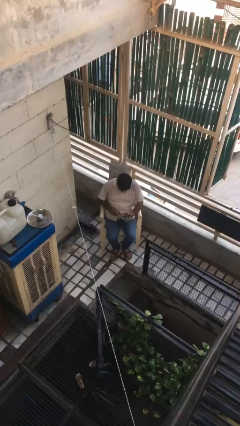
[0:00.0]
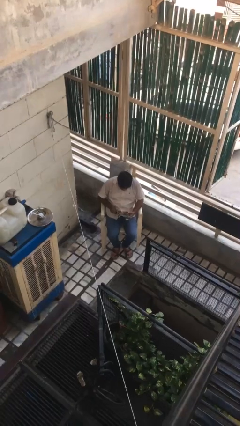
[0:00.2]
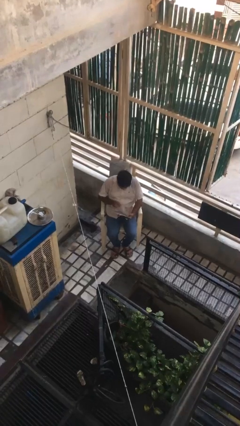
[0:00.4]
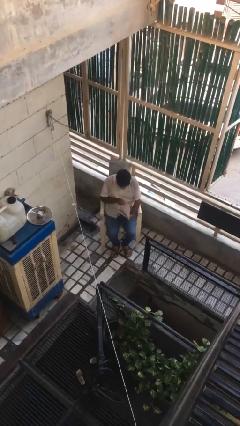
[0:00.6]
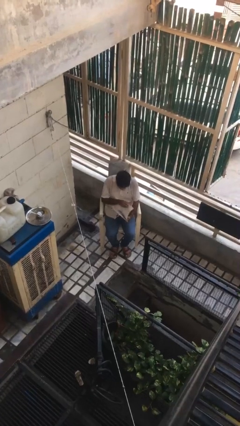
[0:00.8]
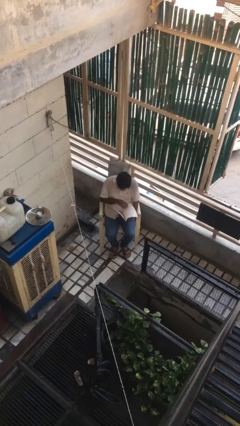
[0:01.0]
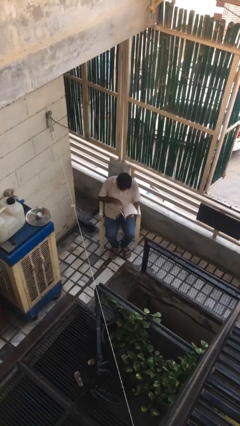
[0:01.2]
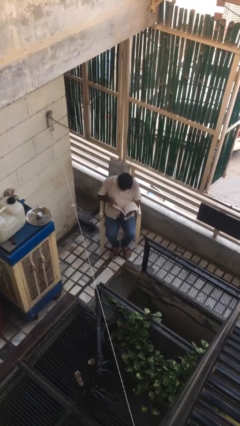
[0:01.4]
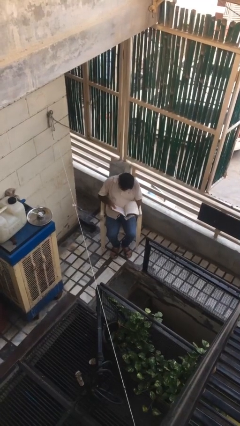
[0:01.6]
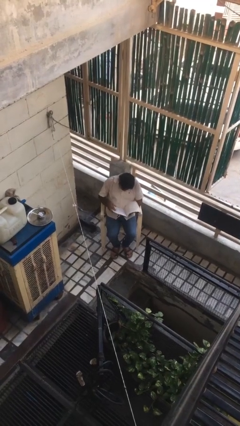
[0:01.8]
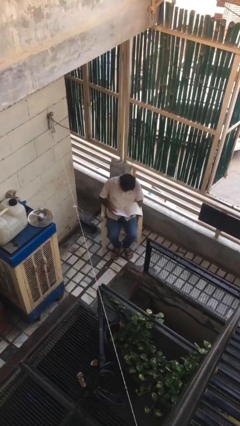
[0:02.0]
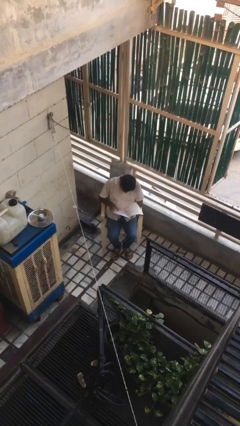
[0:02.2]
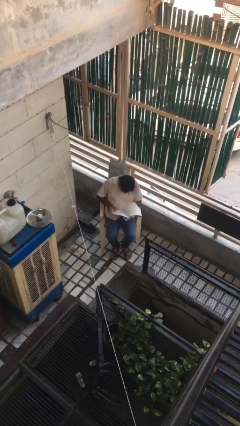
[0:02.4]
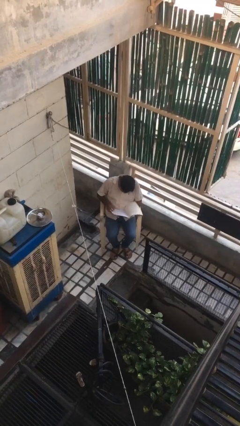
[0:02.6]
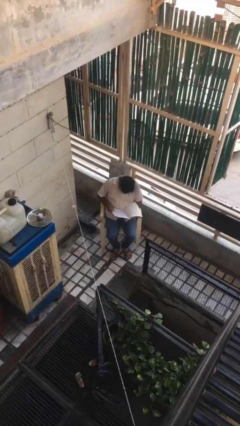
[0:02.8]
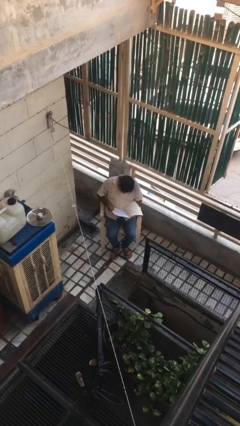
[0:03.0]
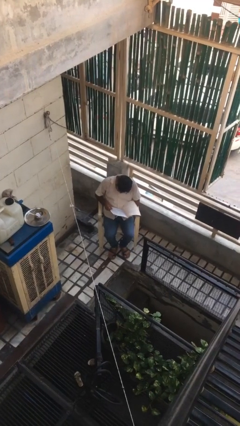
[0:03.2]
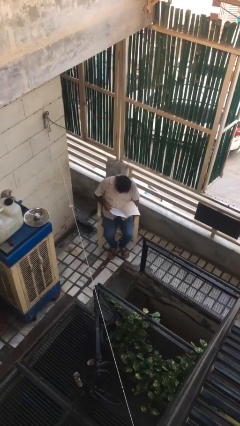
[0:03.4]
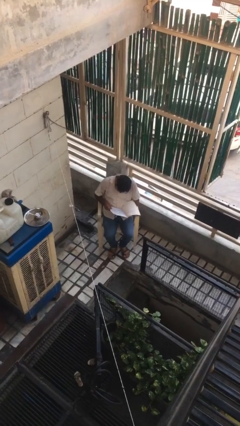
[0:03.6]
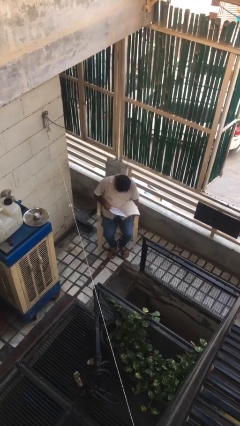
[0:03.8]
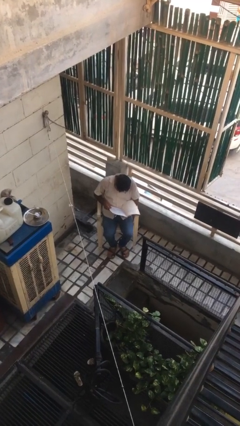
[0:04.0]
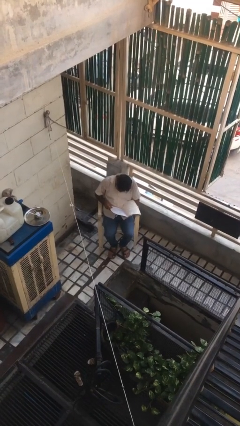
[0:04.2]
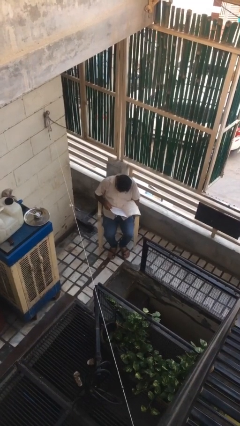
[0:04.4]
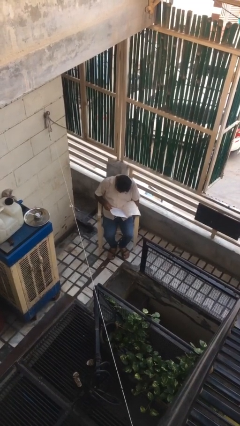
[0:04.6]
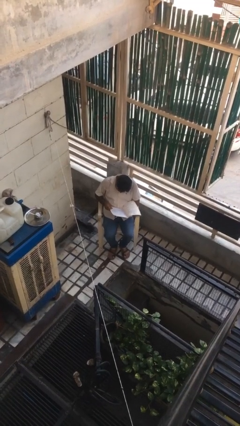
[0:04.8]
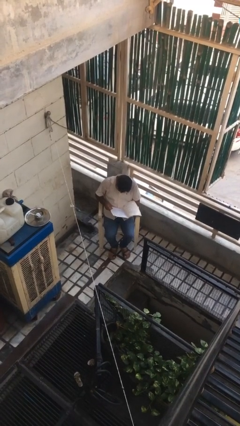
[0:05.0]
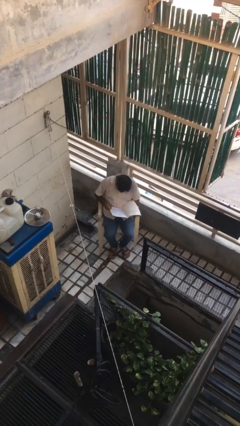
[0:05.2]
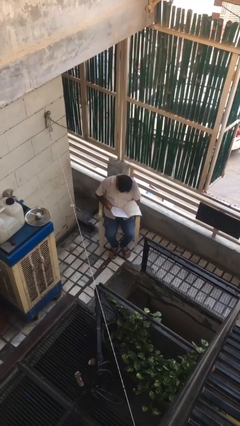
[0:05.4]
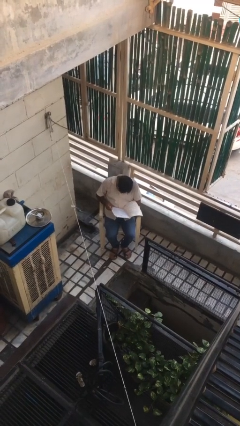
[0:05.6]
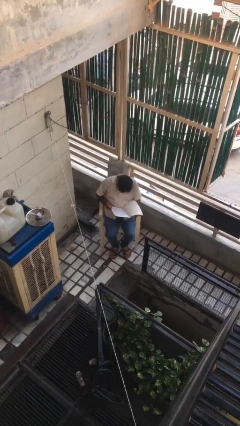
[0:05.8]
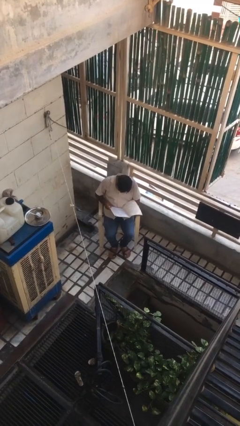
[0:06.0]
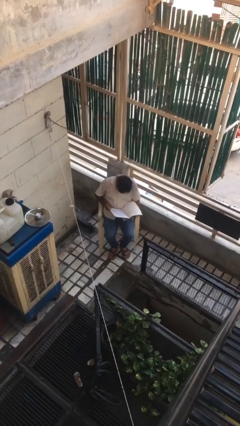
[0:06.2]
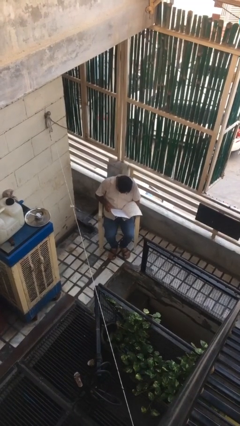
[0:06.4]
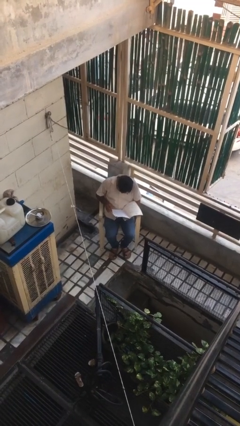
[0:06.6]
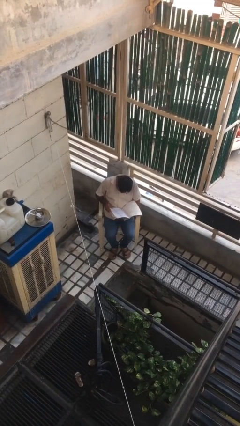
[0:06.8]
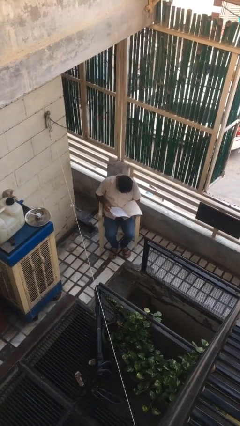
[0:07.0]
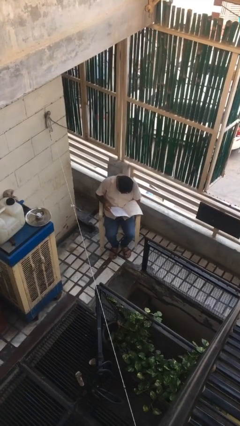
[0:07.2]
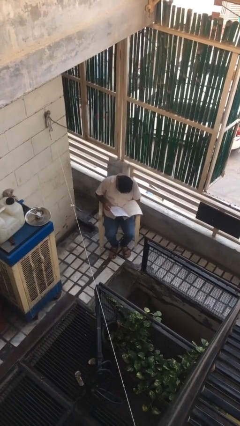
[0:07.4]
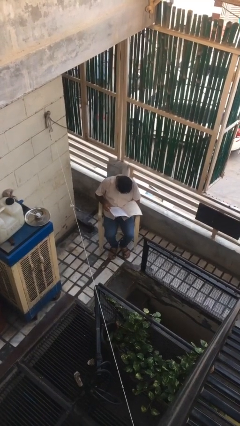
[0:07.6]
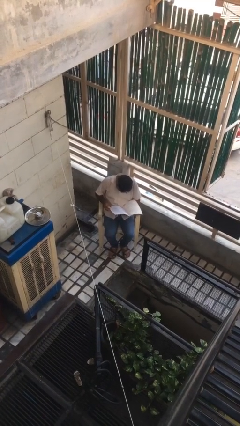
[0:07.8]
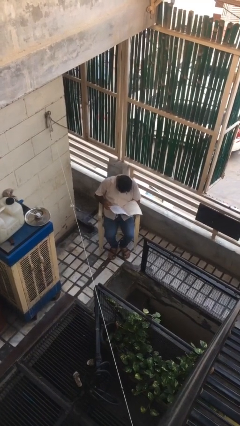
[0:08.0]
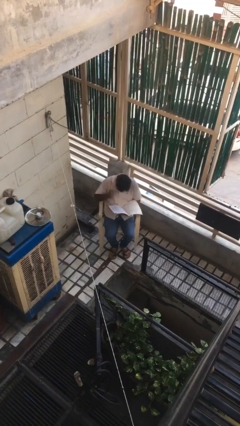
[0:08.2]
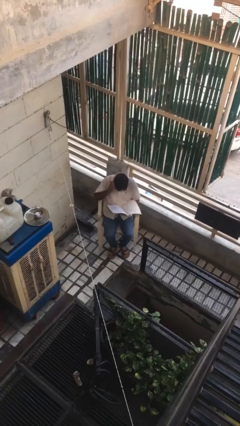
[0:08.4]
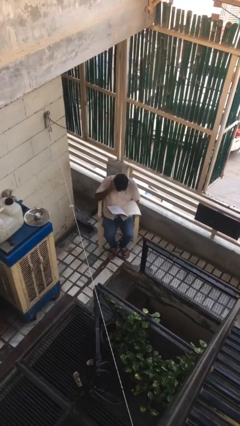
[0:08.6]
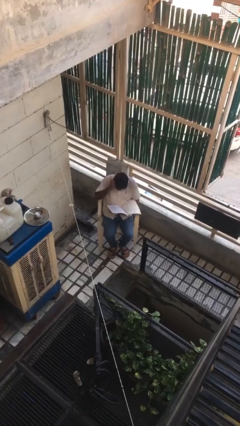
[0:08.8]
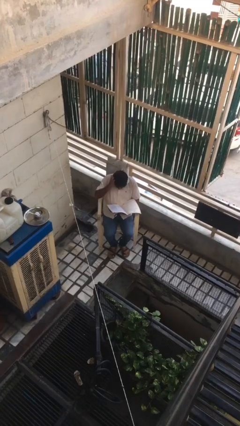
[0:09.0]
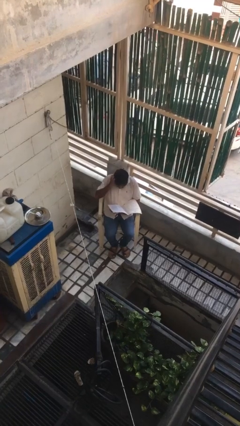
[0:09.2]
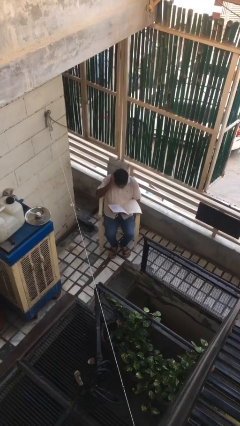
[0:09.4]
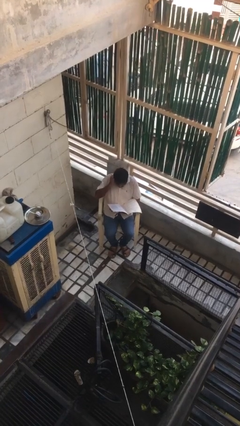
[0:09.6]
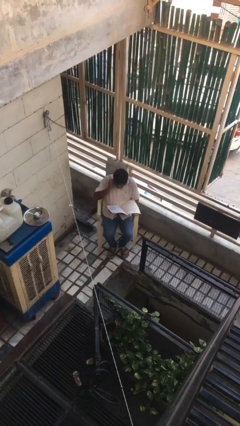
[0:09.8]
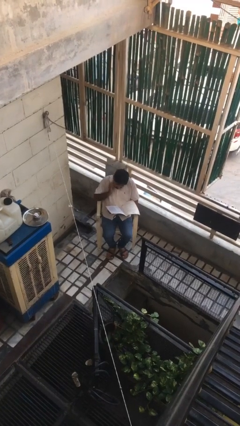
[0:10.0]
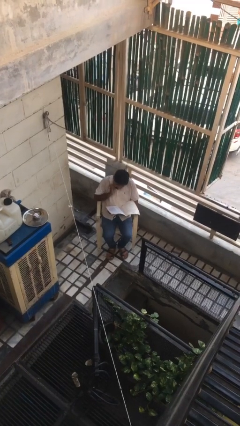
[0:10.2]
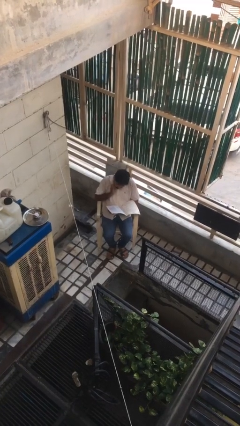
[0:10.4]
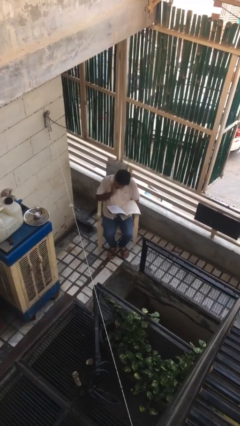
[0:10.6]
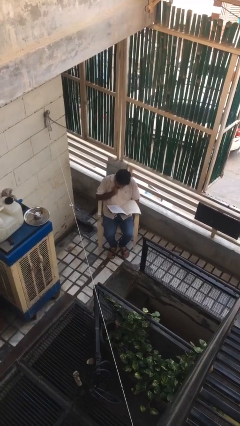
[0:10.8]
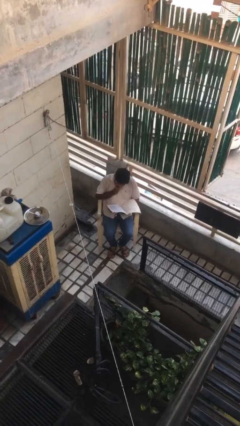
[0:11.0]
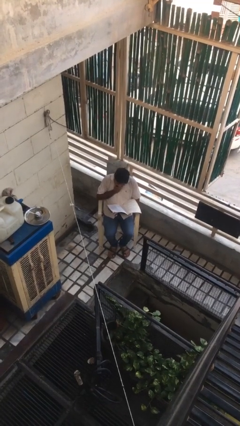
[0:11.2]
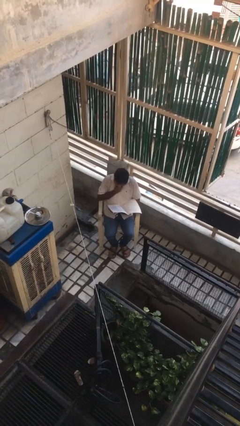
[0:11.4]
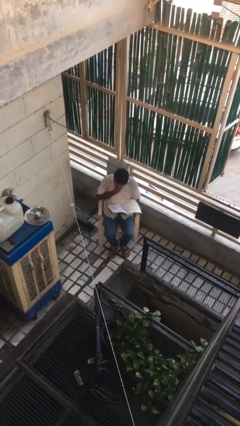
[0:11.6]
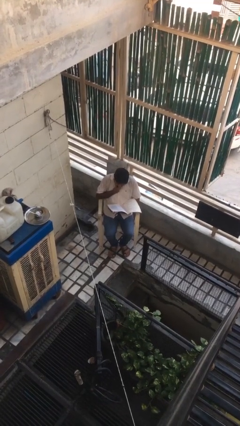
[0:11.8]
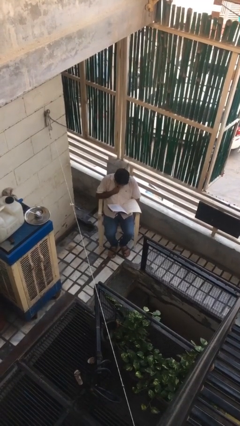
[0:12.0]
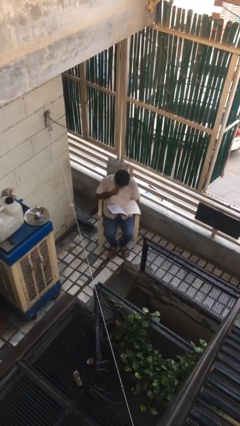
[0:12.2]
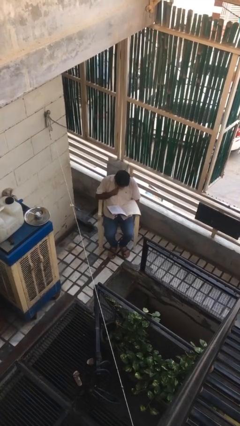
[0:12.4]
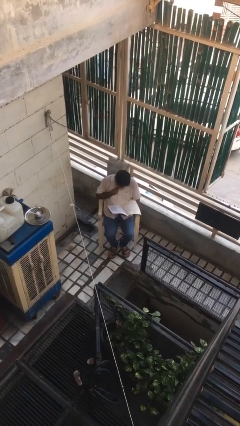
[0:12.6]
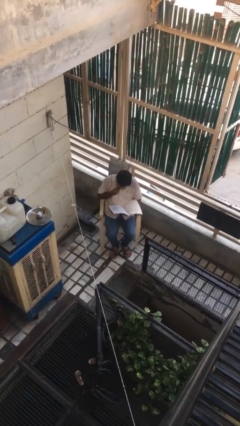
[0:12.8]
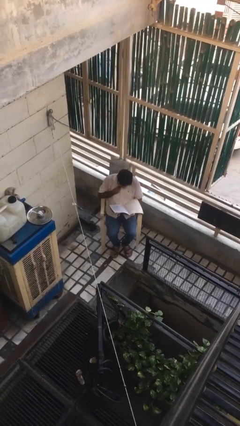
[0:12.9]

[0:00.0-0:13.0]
person reads document

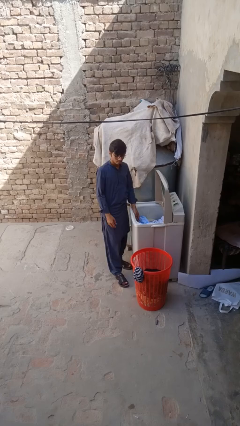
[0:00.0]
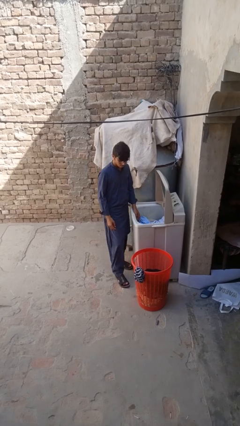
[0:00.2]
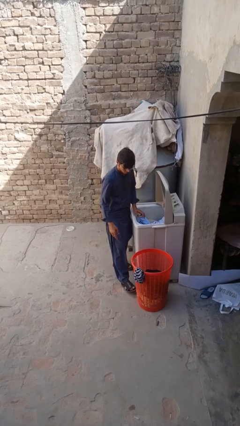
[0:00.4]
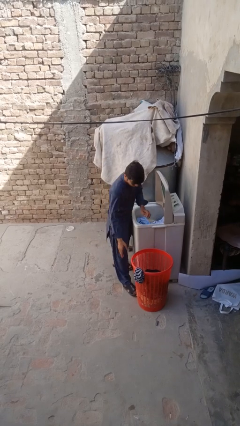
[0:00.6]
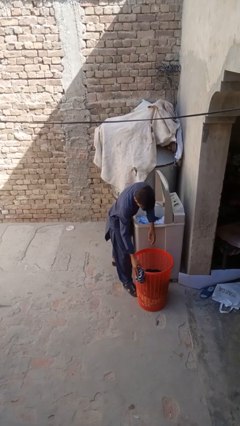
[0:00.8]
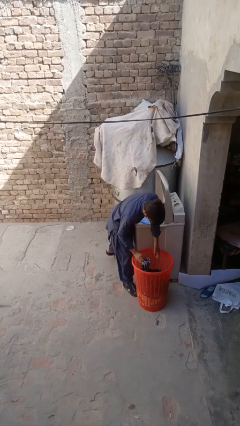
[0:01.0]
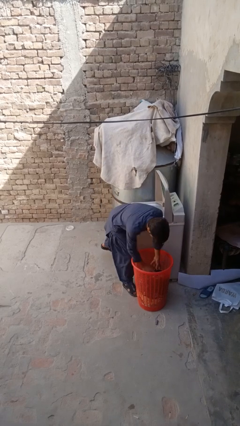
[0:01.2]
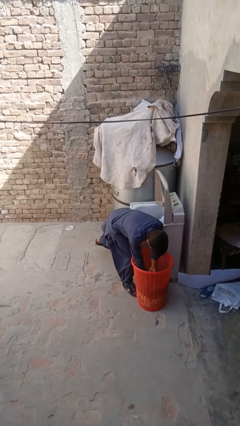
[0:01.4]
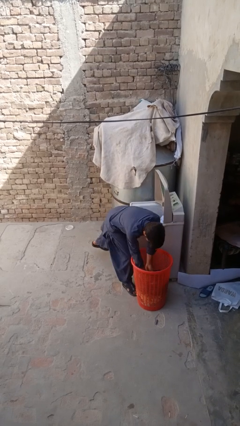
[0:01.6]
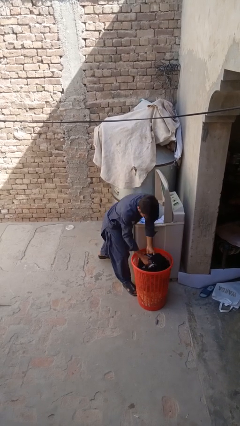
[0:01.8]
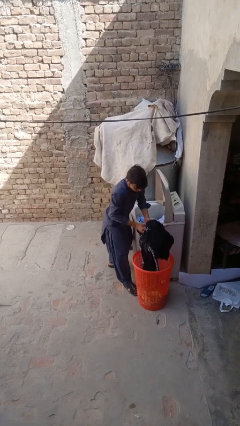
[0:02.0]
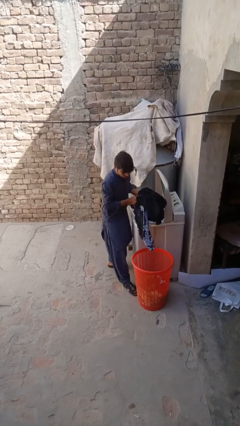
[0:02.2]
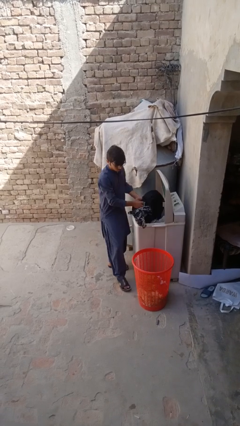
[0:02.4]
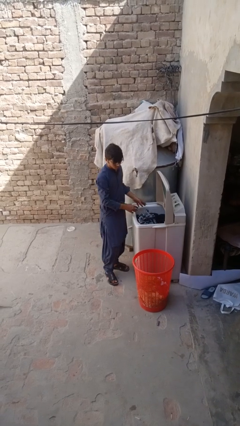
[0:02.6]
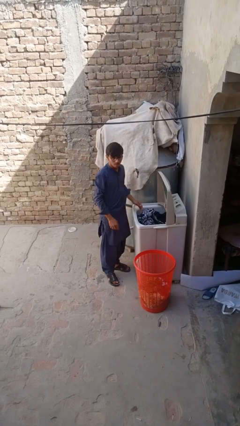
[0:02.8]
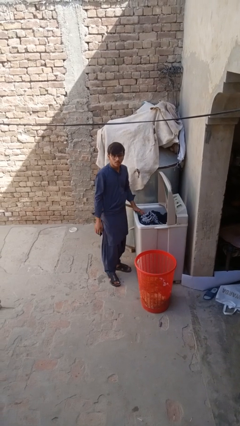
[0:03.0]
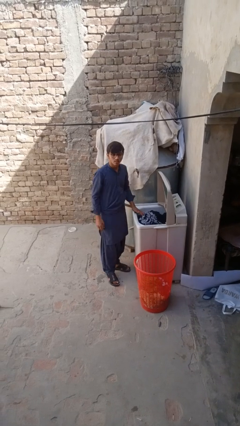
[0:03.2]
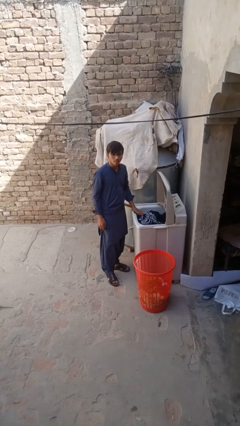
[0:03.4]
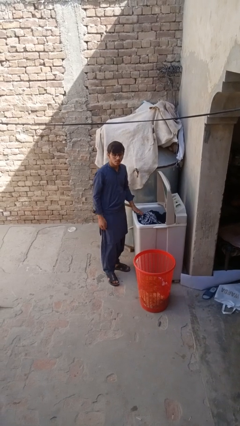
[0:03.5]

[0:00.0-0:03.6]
person loads clotheswasher

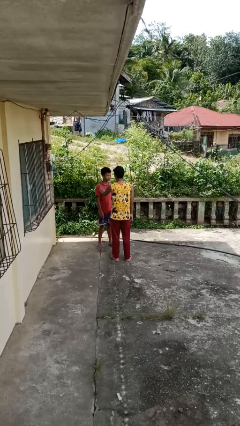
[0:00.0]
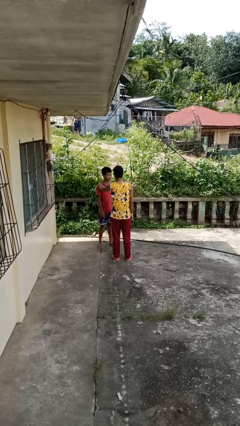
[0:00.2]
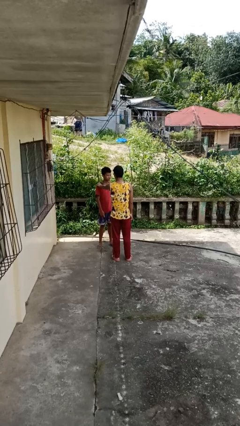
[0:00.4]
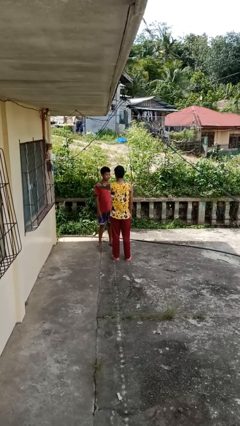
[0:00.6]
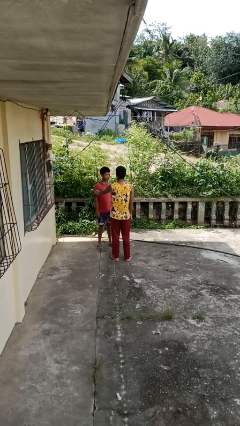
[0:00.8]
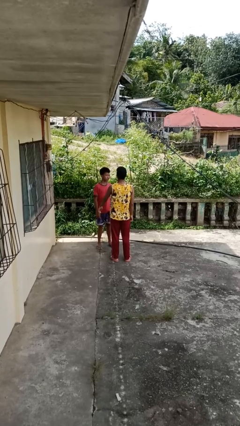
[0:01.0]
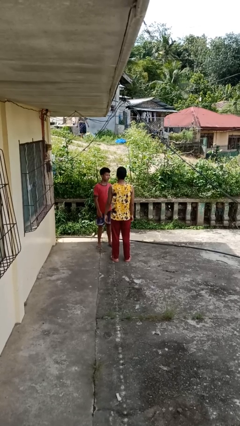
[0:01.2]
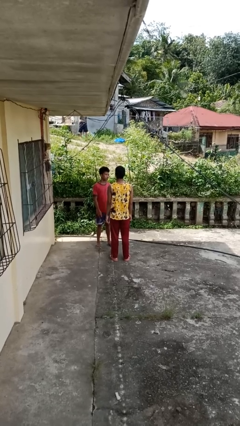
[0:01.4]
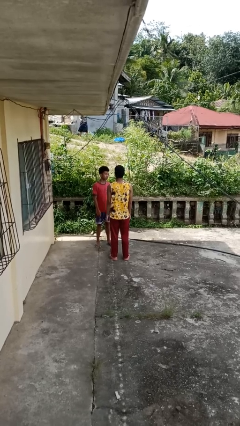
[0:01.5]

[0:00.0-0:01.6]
person shoves person

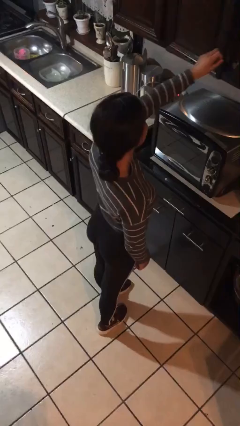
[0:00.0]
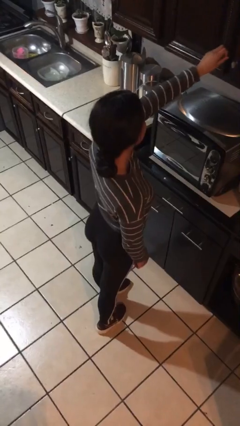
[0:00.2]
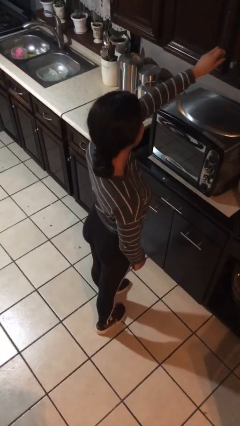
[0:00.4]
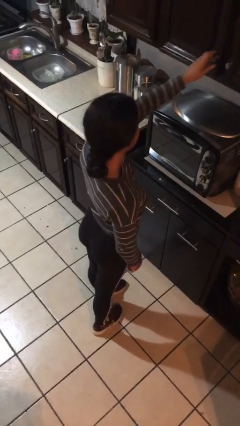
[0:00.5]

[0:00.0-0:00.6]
person closes cabinet
